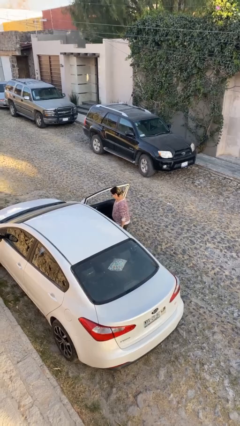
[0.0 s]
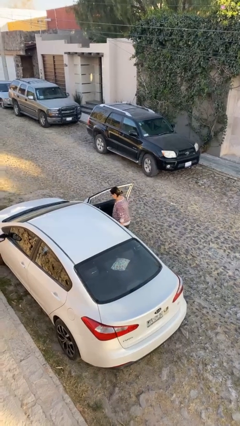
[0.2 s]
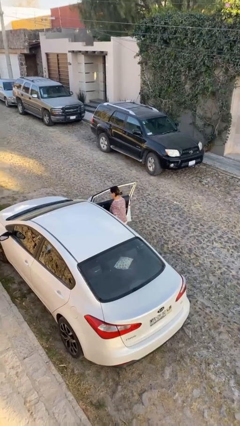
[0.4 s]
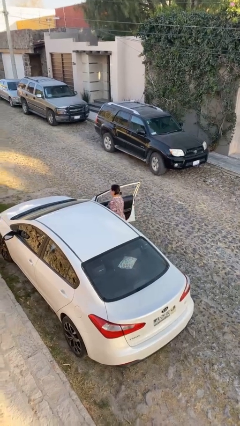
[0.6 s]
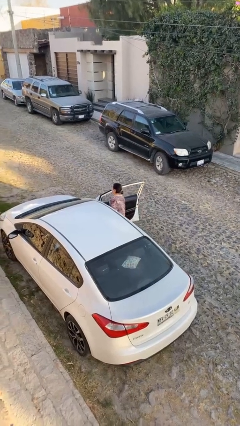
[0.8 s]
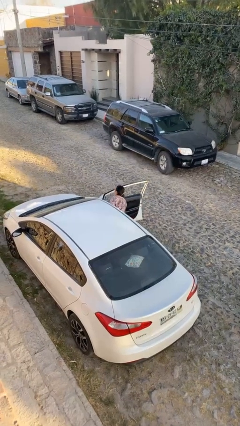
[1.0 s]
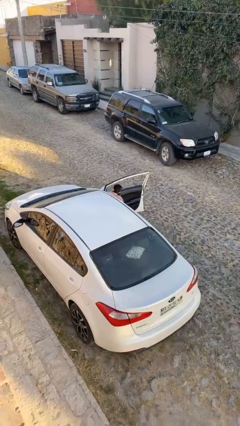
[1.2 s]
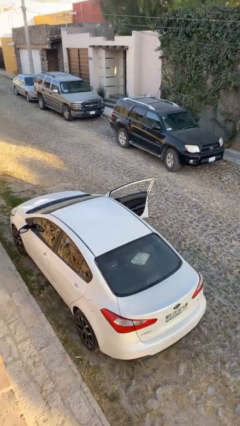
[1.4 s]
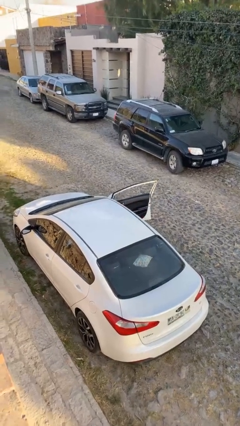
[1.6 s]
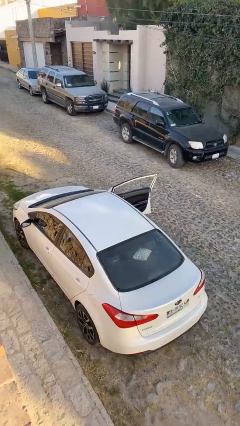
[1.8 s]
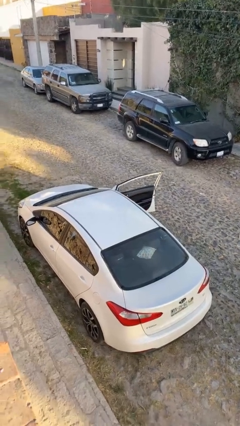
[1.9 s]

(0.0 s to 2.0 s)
person enters car

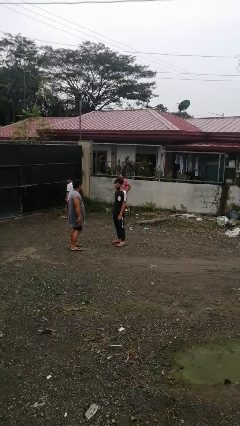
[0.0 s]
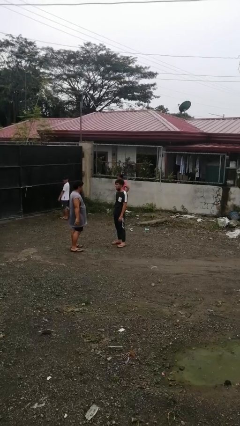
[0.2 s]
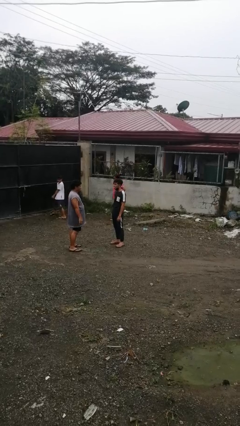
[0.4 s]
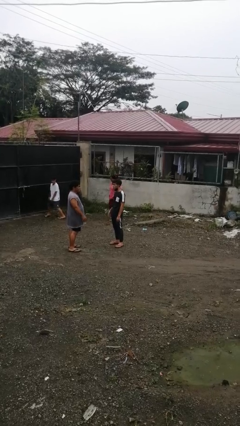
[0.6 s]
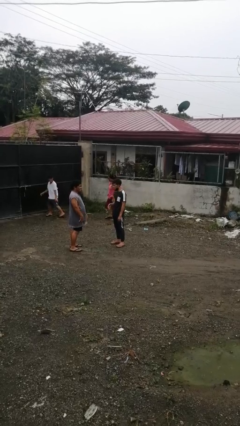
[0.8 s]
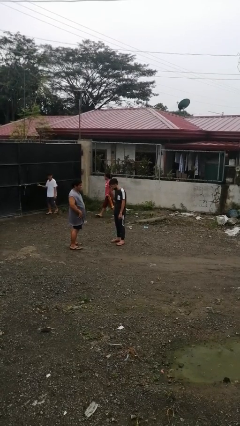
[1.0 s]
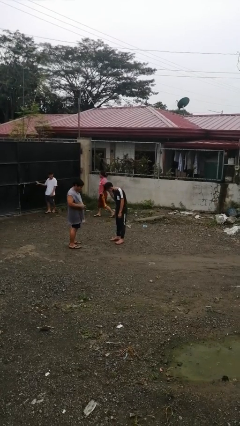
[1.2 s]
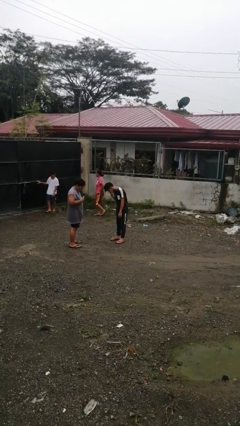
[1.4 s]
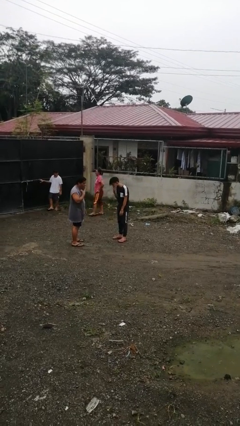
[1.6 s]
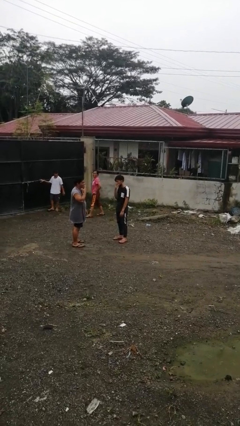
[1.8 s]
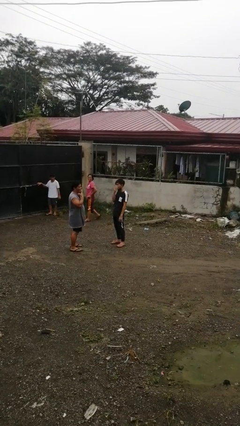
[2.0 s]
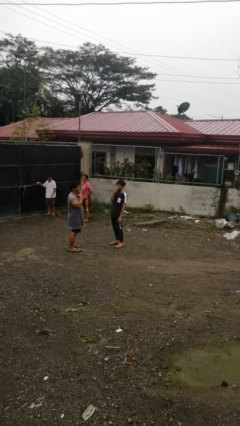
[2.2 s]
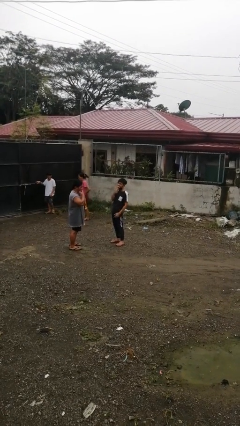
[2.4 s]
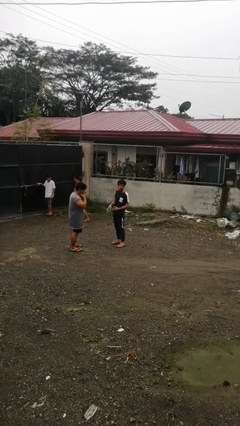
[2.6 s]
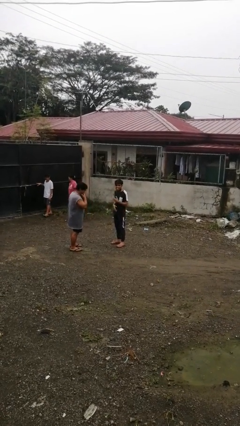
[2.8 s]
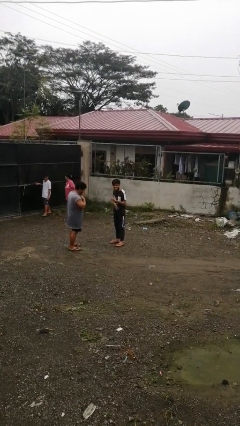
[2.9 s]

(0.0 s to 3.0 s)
person laughs with person

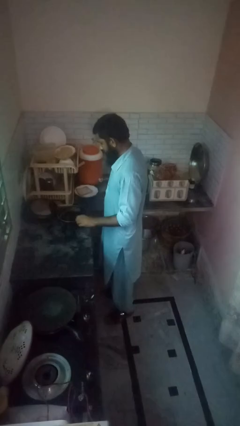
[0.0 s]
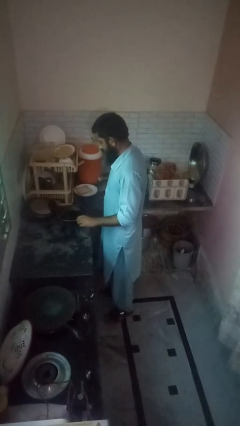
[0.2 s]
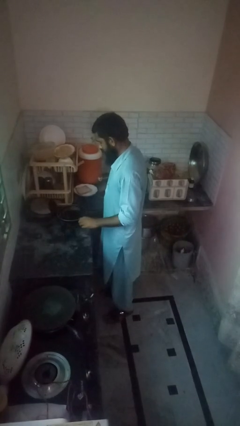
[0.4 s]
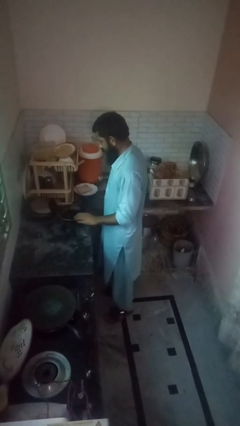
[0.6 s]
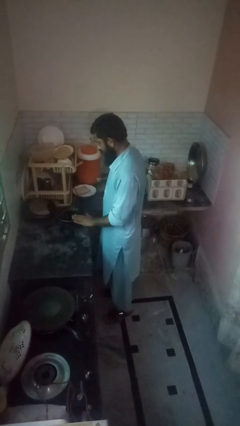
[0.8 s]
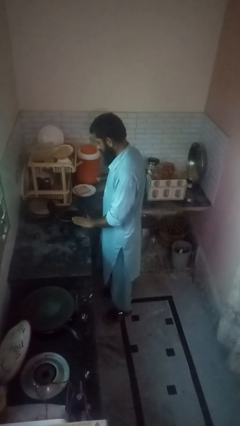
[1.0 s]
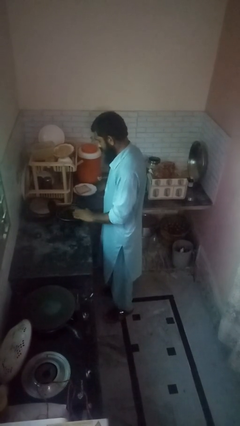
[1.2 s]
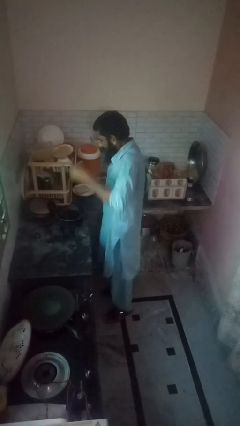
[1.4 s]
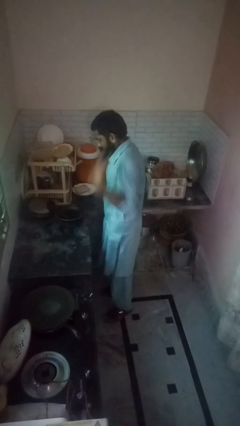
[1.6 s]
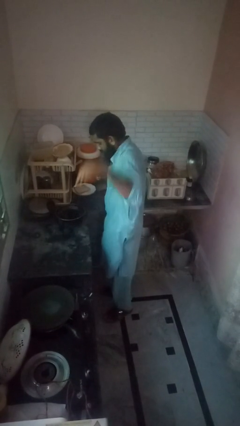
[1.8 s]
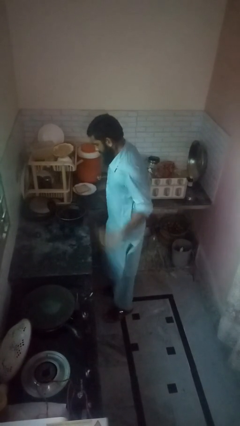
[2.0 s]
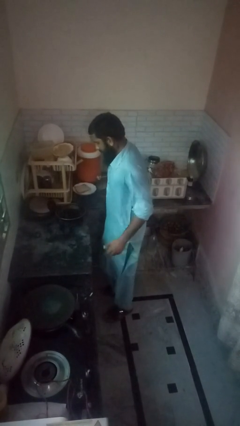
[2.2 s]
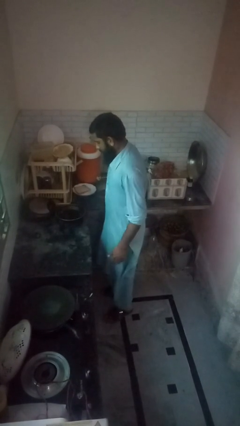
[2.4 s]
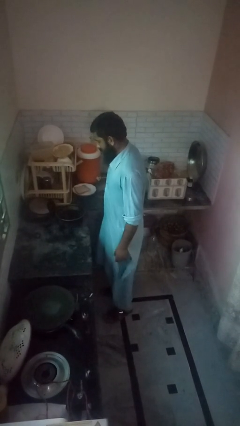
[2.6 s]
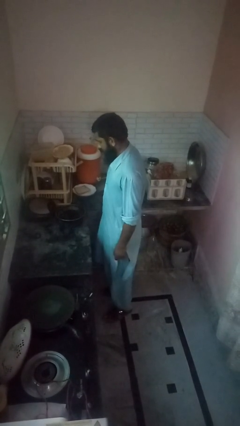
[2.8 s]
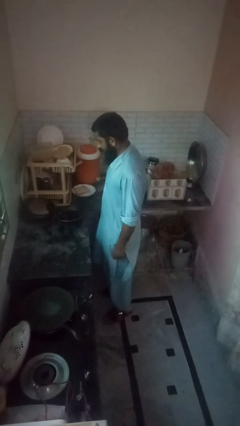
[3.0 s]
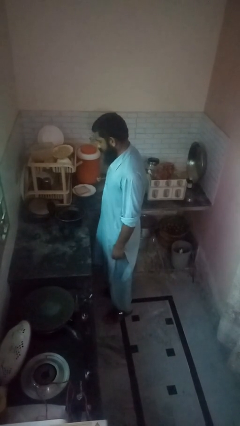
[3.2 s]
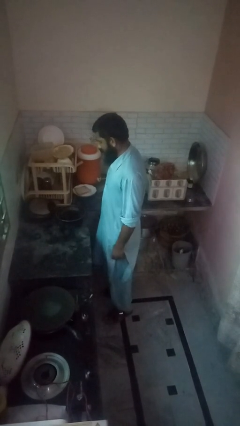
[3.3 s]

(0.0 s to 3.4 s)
person burns hand

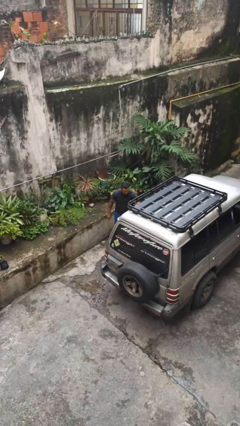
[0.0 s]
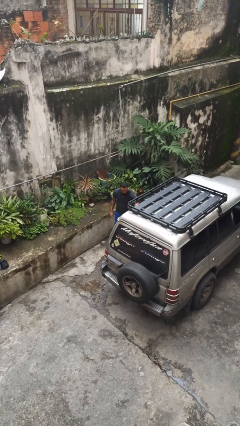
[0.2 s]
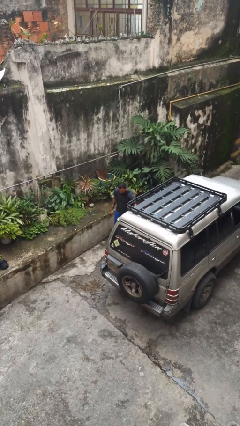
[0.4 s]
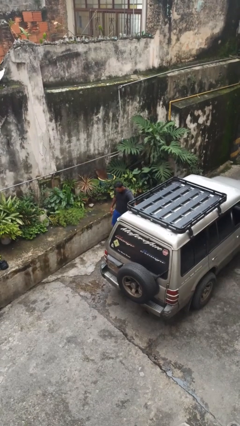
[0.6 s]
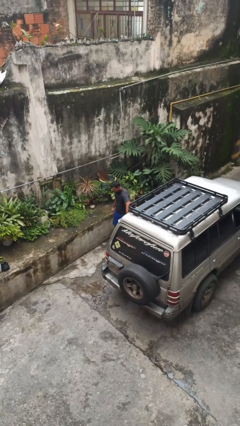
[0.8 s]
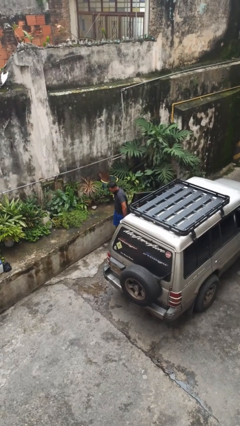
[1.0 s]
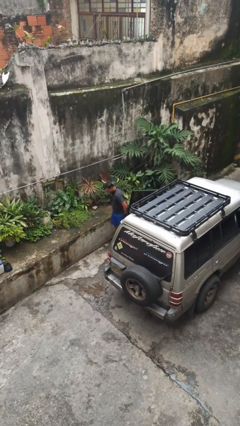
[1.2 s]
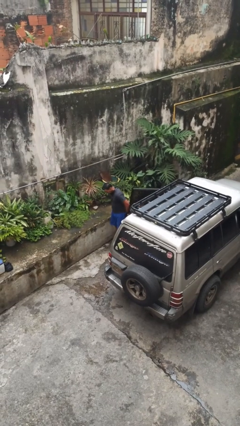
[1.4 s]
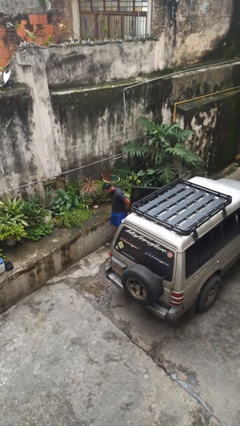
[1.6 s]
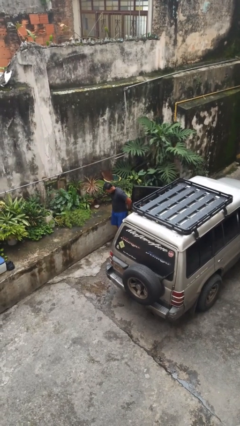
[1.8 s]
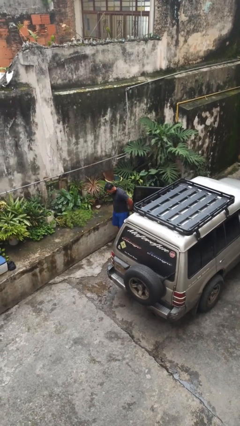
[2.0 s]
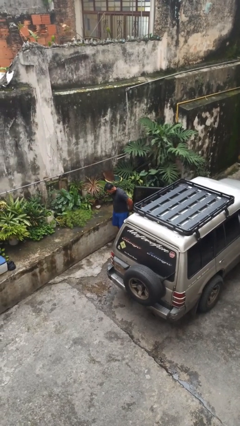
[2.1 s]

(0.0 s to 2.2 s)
person opens car door

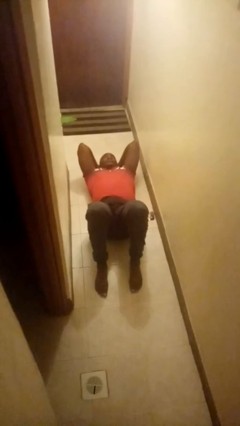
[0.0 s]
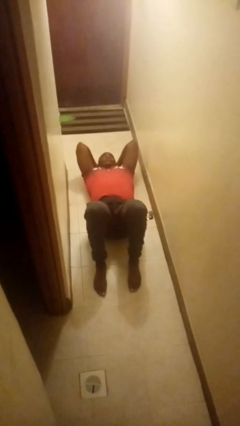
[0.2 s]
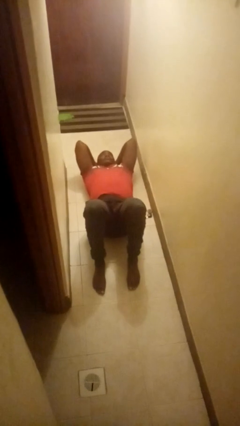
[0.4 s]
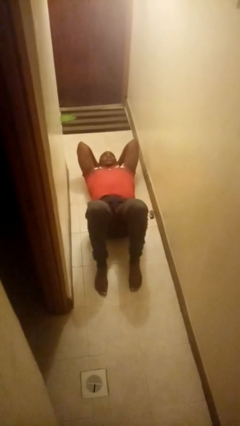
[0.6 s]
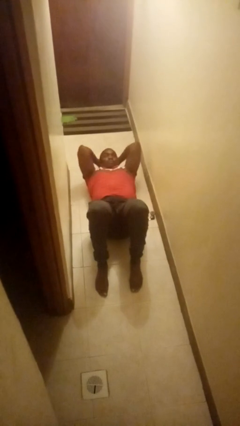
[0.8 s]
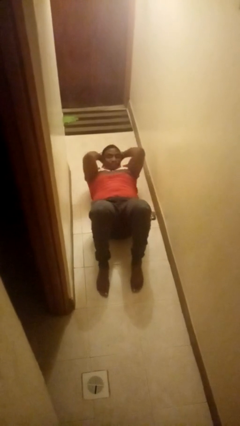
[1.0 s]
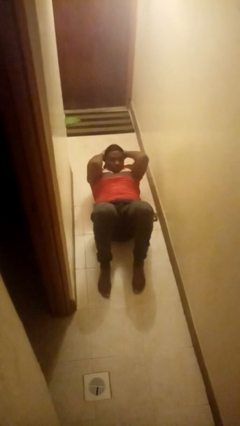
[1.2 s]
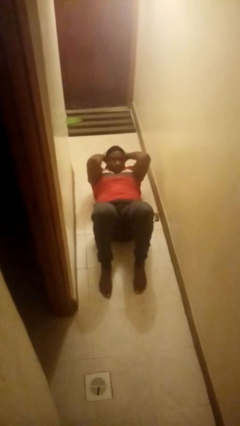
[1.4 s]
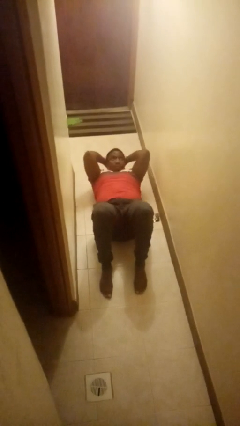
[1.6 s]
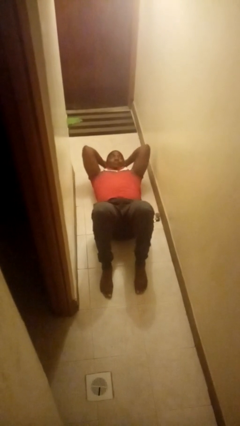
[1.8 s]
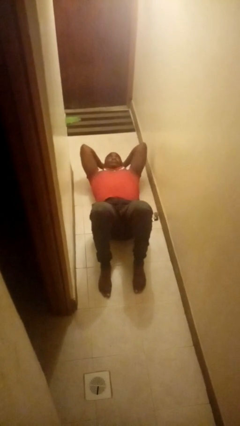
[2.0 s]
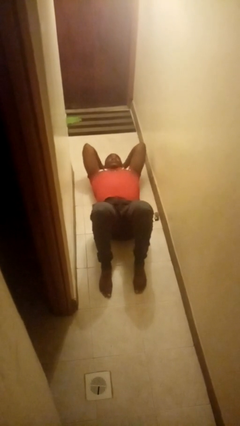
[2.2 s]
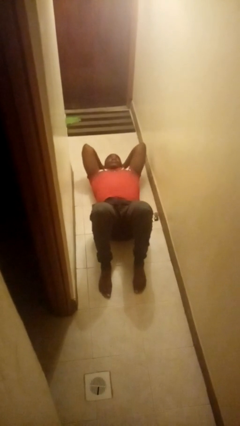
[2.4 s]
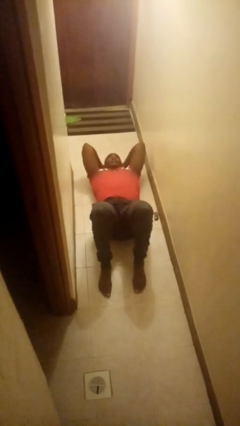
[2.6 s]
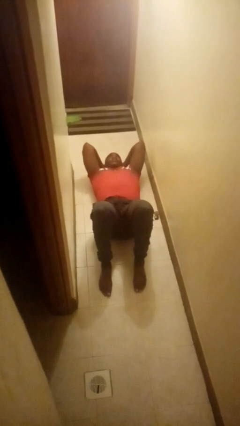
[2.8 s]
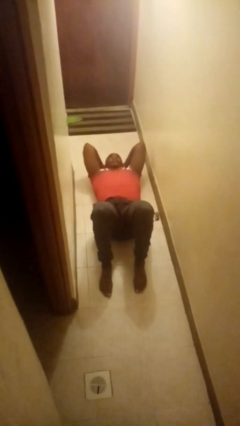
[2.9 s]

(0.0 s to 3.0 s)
person exercises with situp

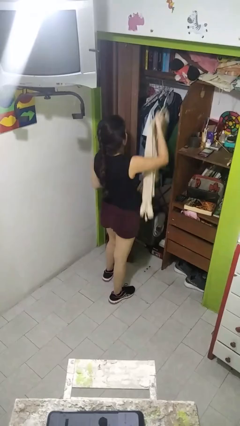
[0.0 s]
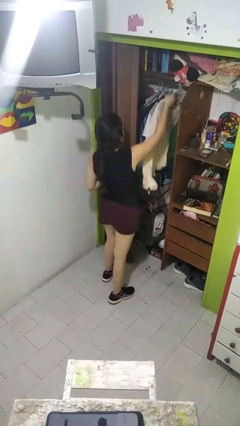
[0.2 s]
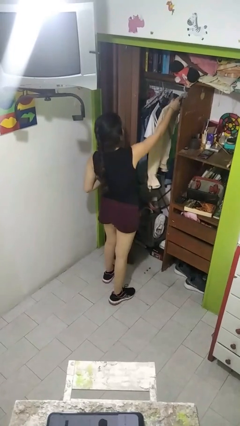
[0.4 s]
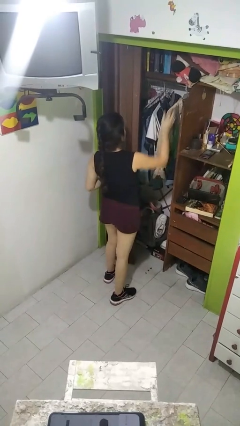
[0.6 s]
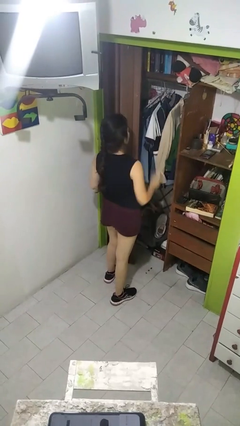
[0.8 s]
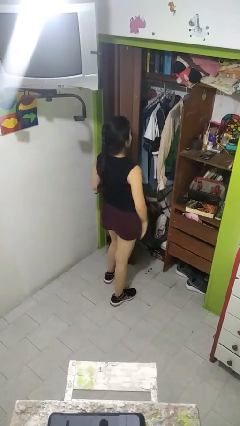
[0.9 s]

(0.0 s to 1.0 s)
person puts clothes into closet

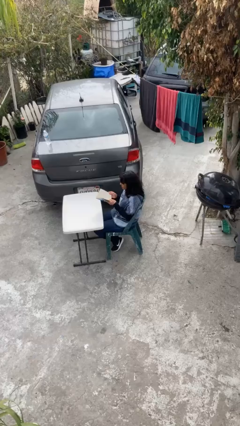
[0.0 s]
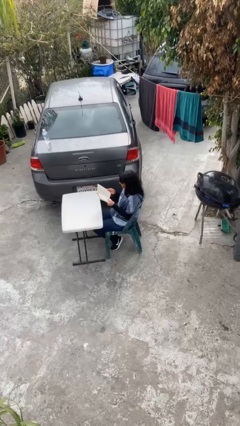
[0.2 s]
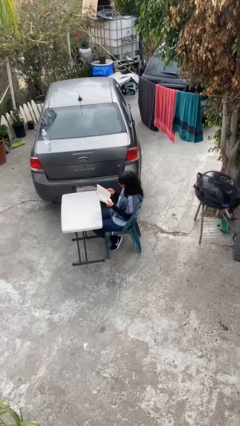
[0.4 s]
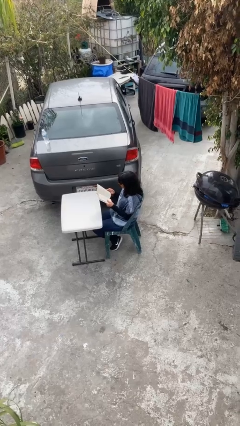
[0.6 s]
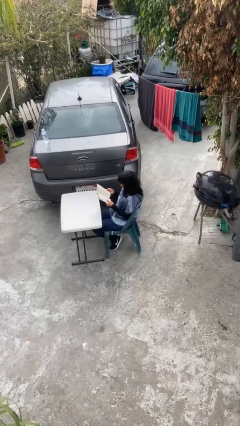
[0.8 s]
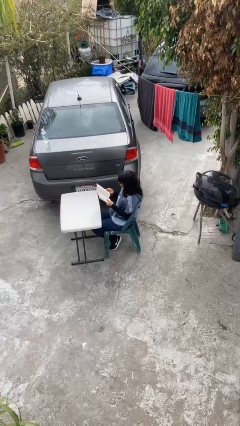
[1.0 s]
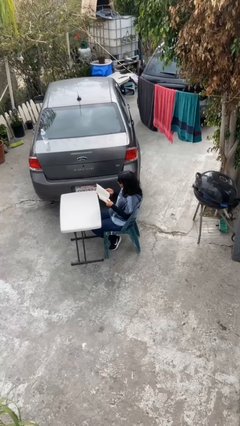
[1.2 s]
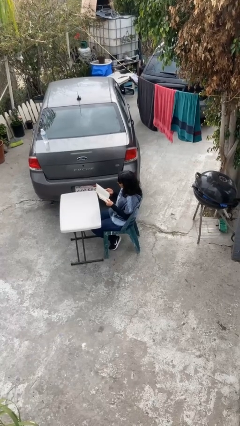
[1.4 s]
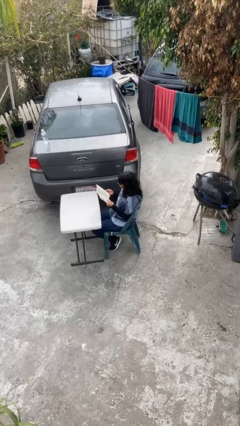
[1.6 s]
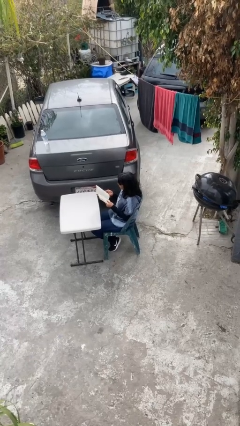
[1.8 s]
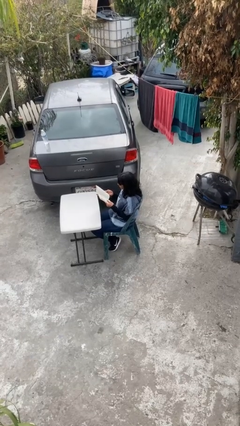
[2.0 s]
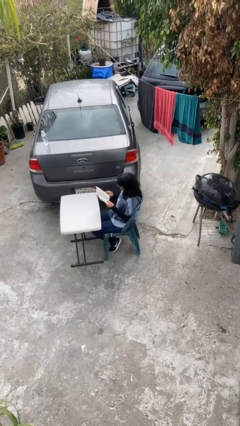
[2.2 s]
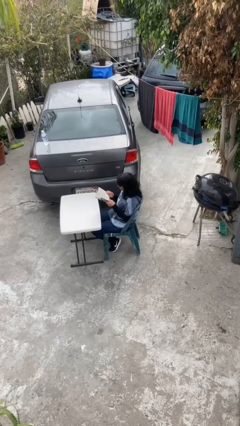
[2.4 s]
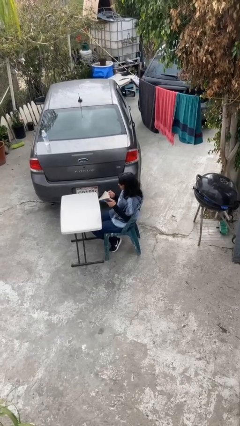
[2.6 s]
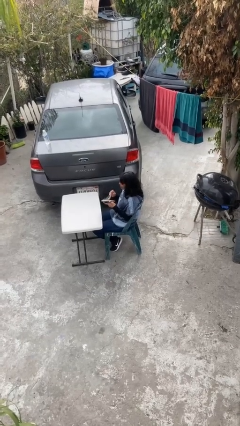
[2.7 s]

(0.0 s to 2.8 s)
person reads document
